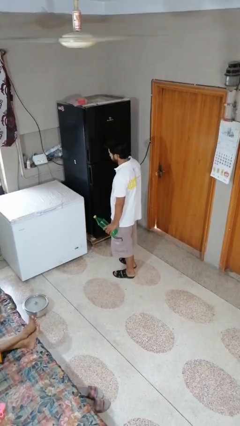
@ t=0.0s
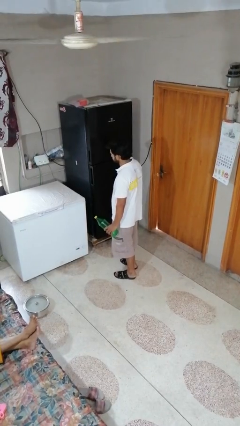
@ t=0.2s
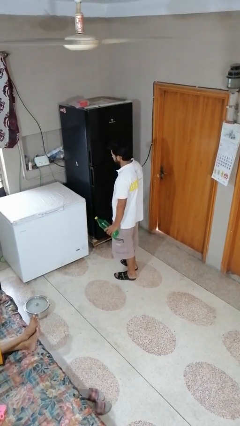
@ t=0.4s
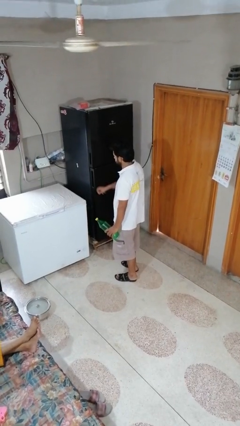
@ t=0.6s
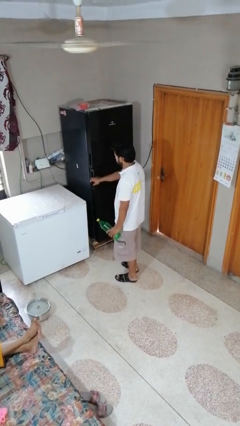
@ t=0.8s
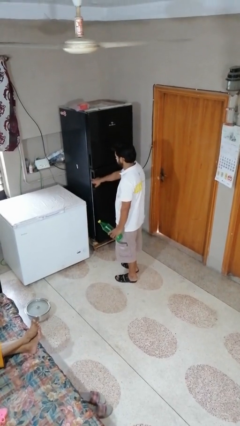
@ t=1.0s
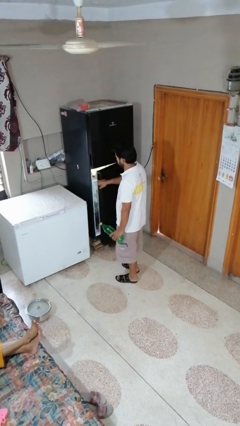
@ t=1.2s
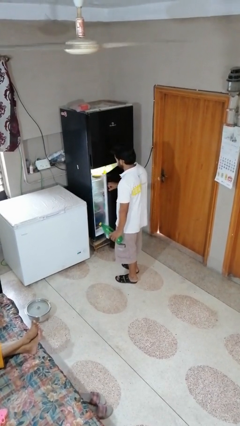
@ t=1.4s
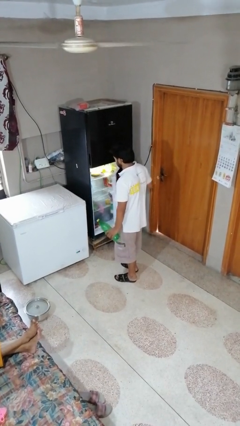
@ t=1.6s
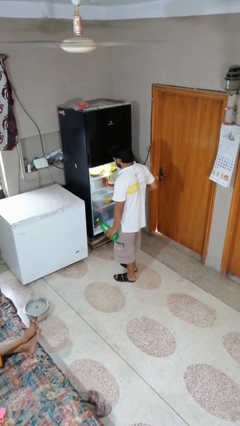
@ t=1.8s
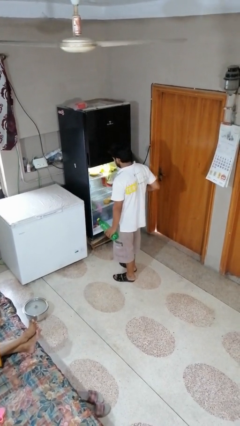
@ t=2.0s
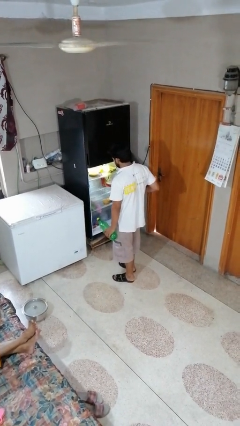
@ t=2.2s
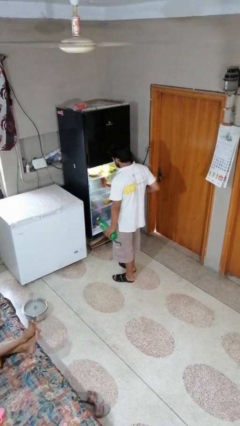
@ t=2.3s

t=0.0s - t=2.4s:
person opens refrigerator

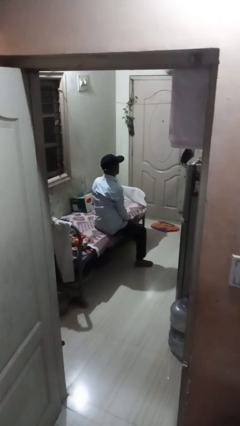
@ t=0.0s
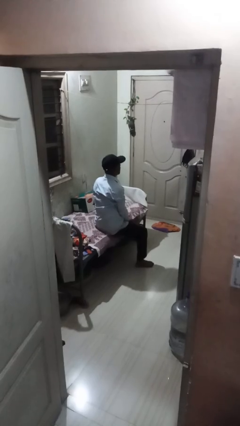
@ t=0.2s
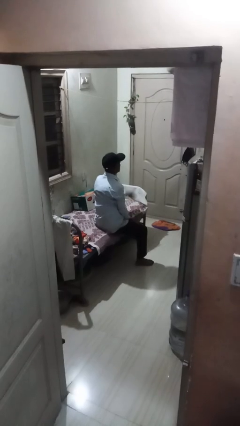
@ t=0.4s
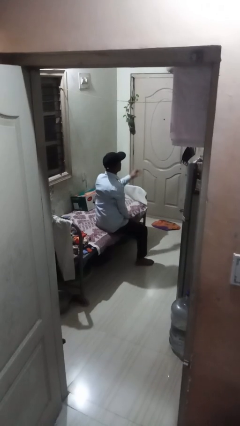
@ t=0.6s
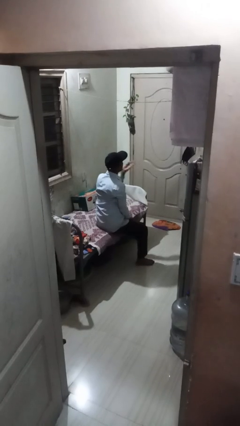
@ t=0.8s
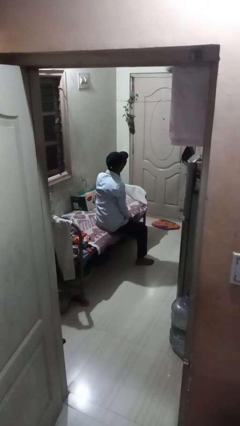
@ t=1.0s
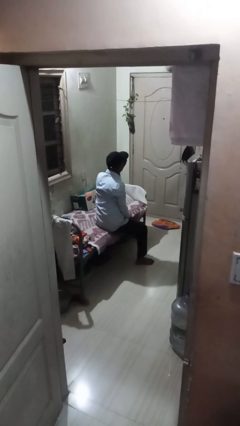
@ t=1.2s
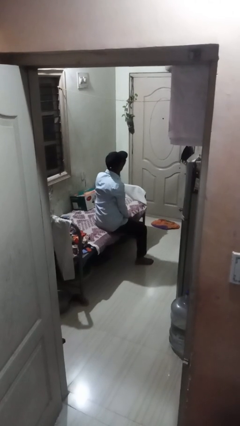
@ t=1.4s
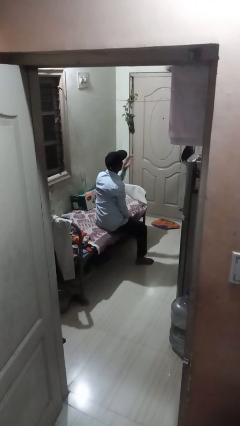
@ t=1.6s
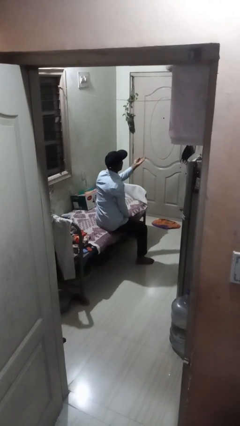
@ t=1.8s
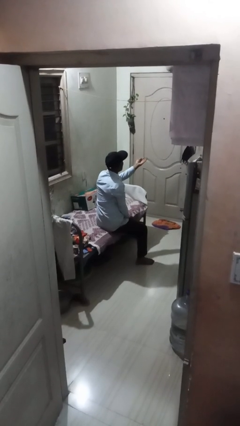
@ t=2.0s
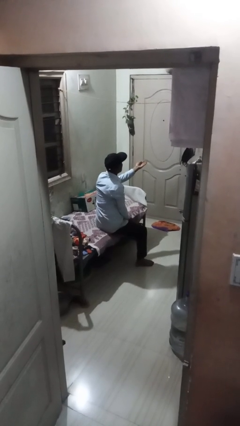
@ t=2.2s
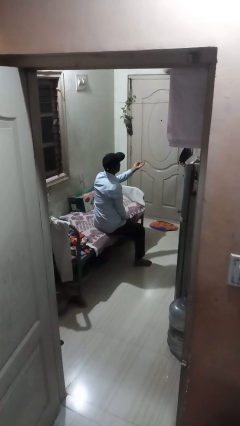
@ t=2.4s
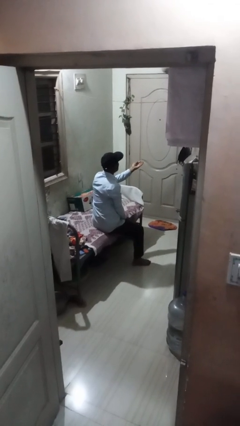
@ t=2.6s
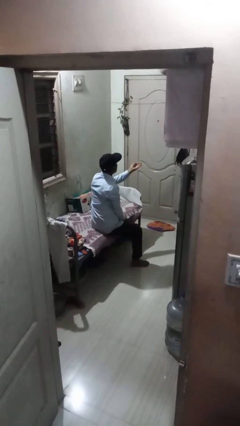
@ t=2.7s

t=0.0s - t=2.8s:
person gestures blow kiss

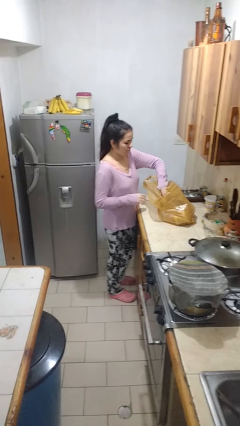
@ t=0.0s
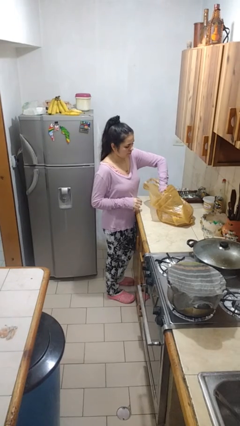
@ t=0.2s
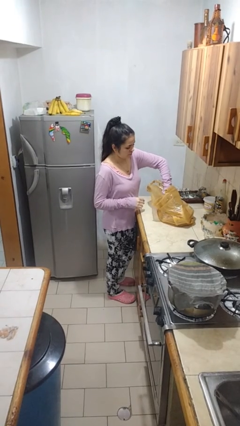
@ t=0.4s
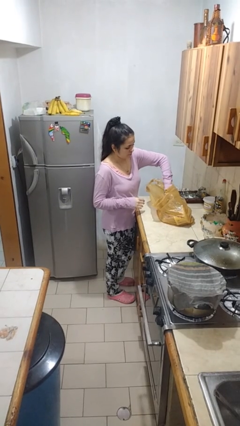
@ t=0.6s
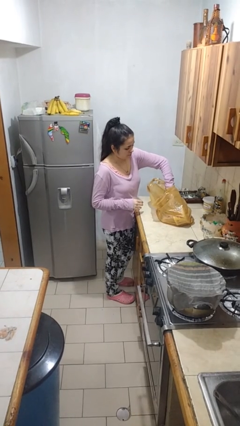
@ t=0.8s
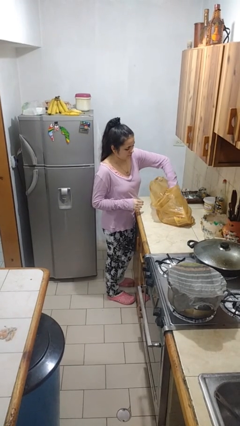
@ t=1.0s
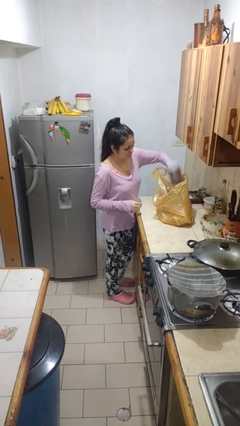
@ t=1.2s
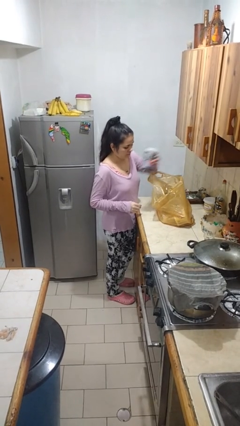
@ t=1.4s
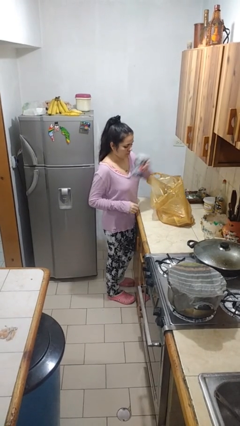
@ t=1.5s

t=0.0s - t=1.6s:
person takes object from bag

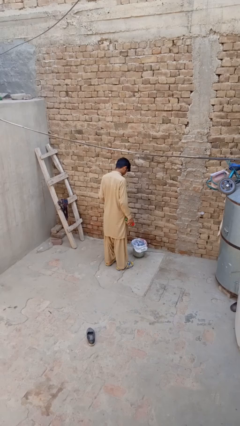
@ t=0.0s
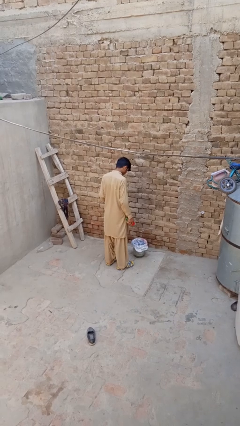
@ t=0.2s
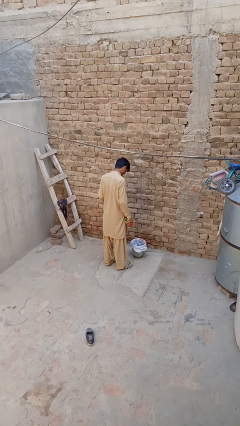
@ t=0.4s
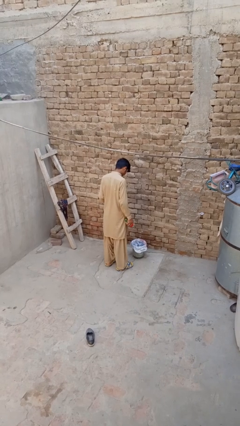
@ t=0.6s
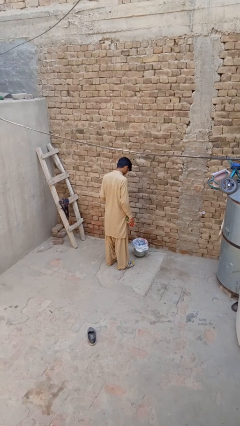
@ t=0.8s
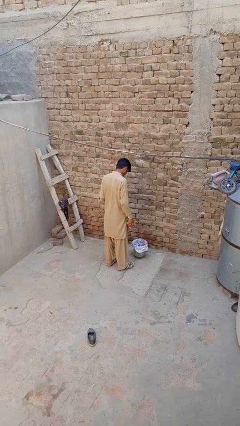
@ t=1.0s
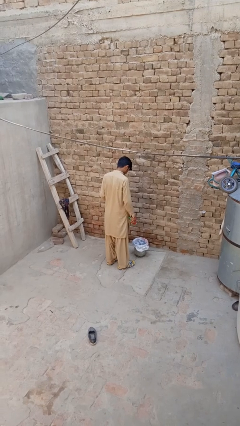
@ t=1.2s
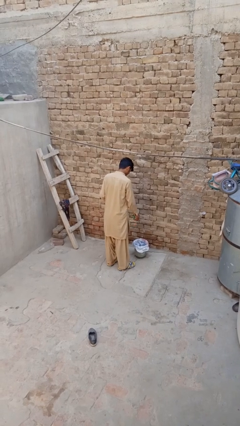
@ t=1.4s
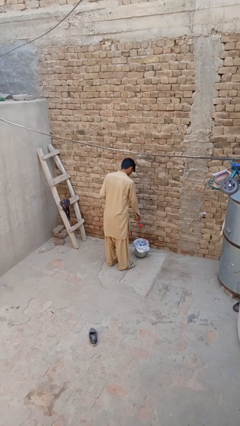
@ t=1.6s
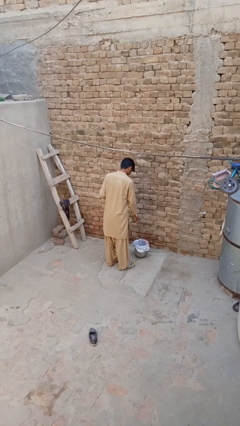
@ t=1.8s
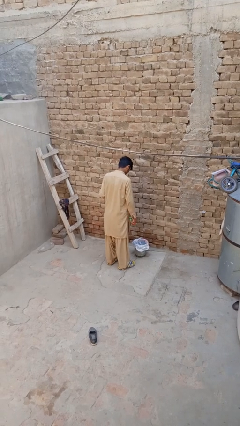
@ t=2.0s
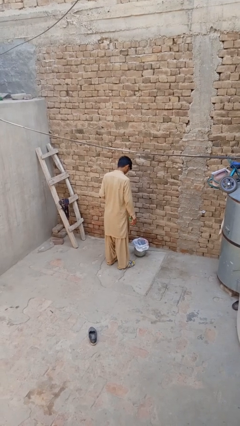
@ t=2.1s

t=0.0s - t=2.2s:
person discards trash

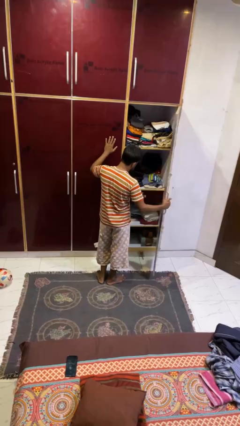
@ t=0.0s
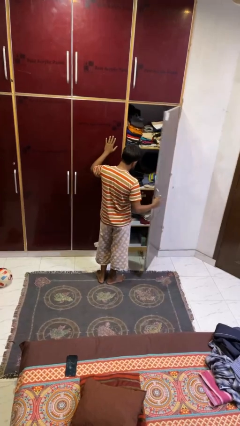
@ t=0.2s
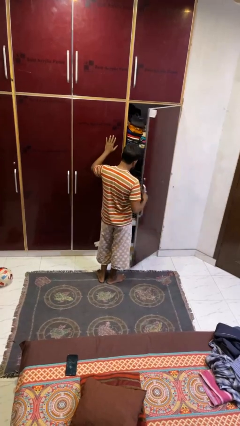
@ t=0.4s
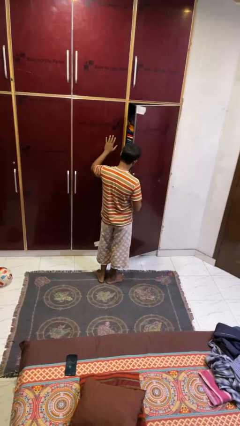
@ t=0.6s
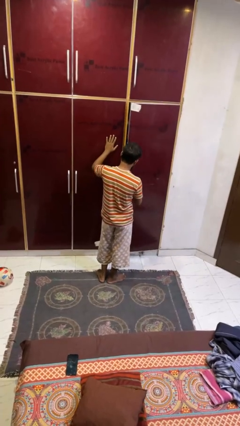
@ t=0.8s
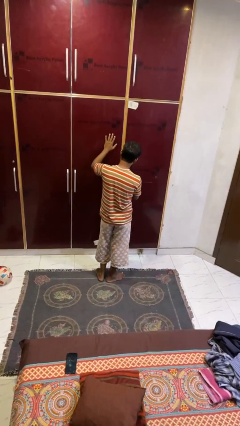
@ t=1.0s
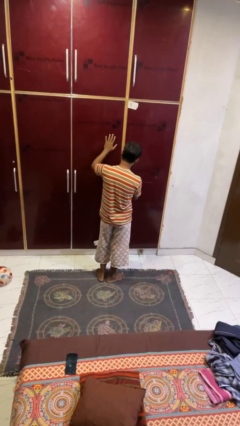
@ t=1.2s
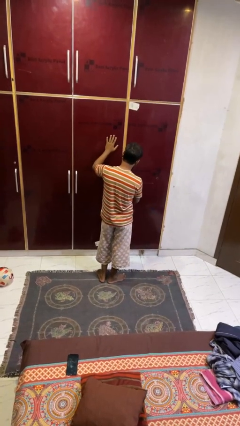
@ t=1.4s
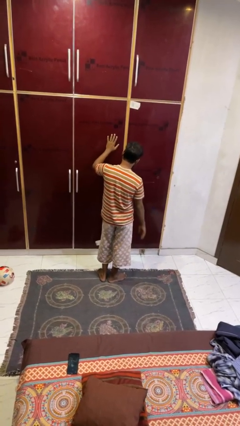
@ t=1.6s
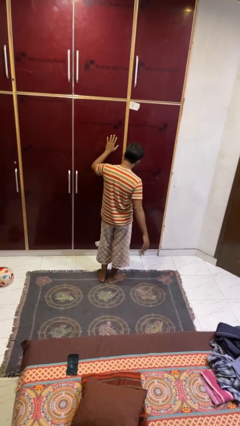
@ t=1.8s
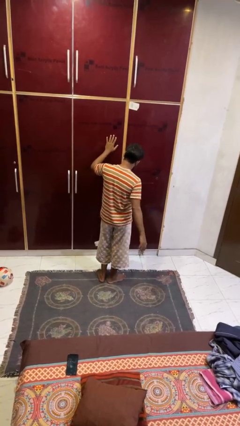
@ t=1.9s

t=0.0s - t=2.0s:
person closes closet door

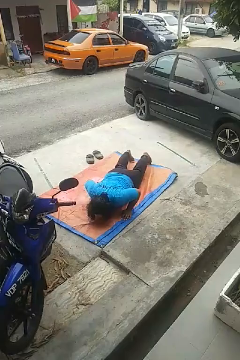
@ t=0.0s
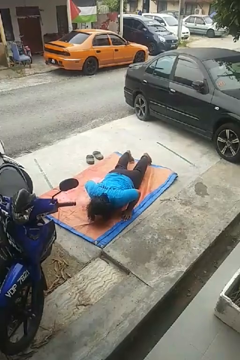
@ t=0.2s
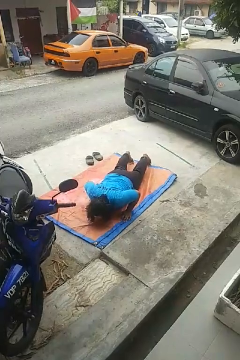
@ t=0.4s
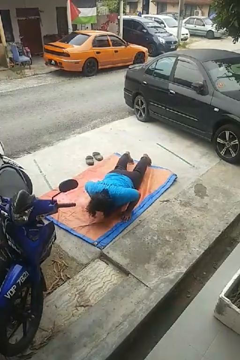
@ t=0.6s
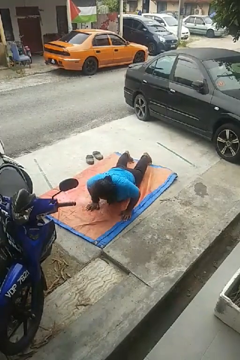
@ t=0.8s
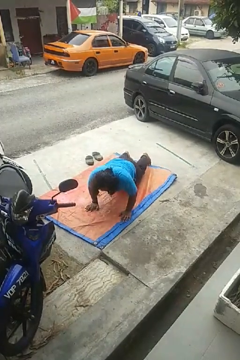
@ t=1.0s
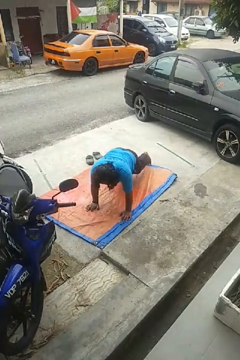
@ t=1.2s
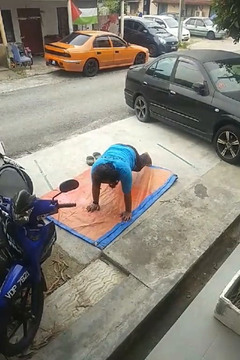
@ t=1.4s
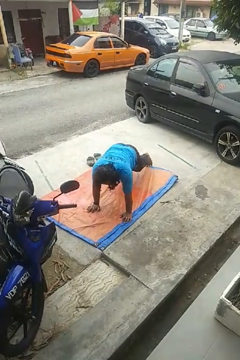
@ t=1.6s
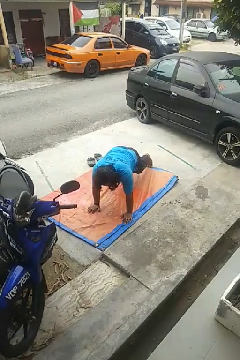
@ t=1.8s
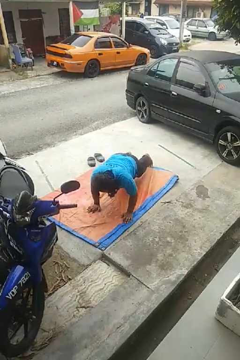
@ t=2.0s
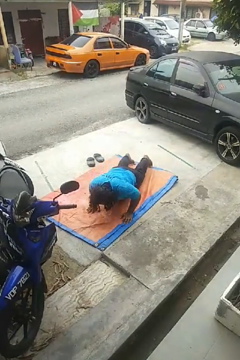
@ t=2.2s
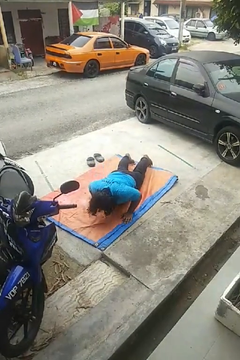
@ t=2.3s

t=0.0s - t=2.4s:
person exercises with pushup

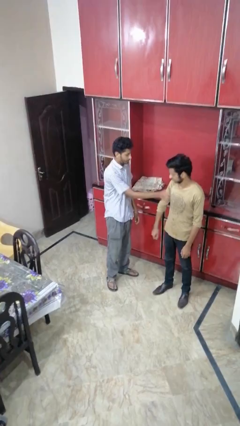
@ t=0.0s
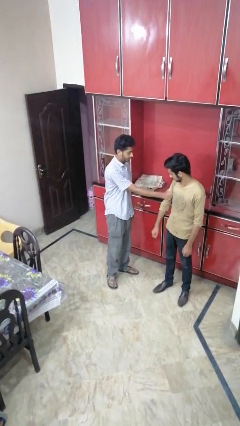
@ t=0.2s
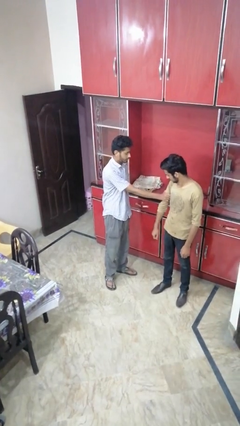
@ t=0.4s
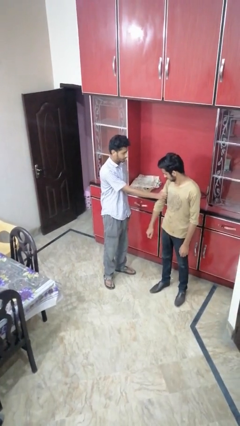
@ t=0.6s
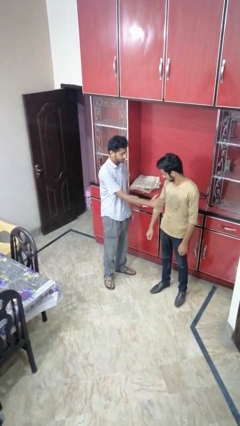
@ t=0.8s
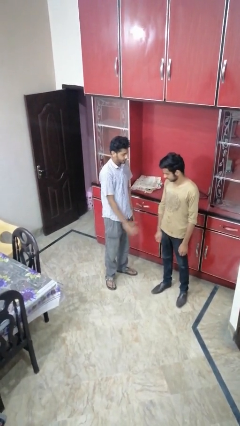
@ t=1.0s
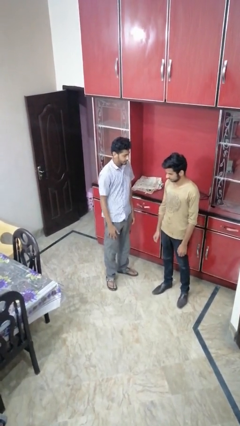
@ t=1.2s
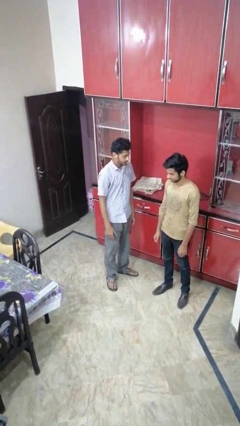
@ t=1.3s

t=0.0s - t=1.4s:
person grabs person by bicep

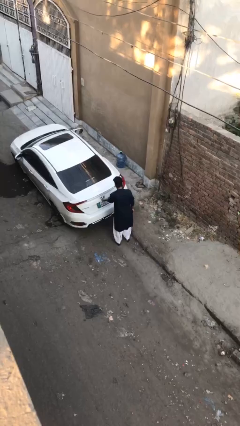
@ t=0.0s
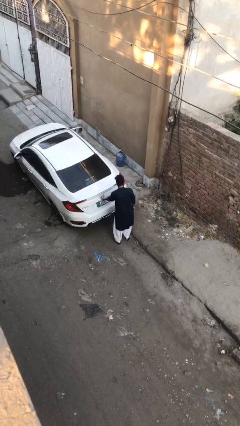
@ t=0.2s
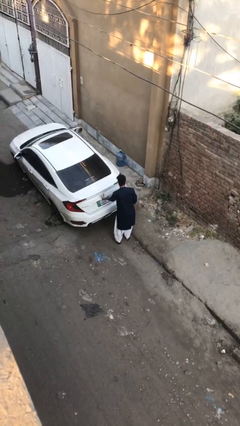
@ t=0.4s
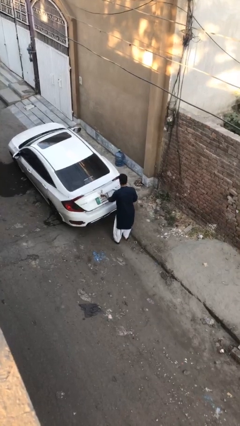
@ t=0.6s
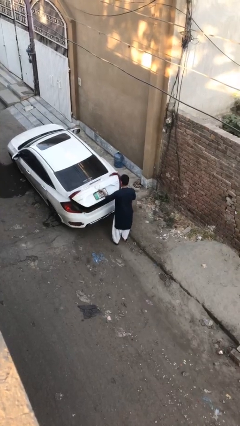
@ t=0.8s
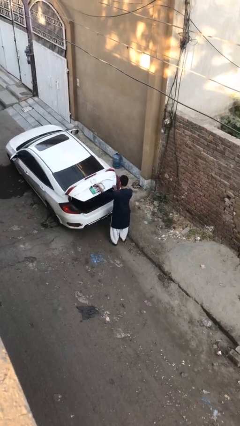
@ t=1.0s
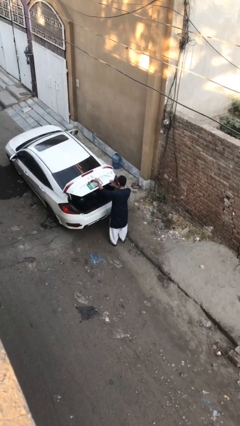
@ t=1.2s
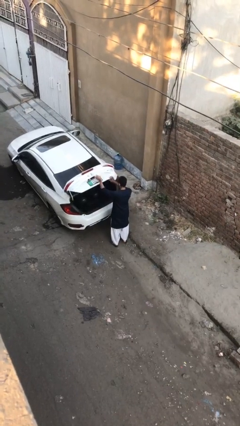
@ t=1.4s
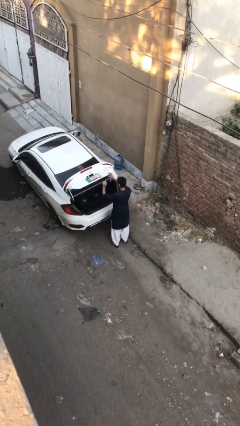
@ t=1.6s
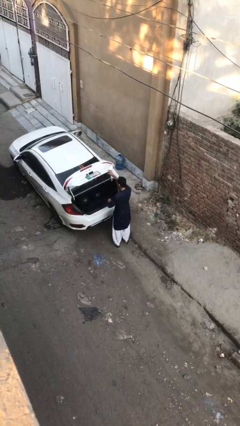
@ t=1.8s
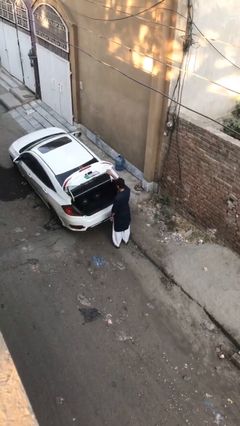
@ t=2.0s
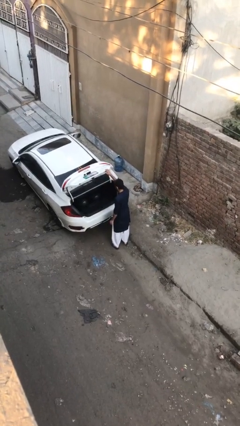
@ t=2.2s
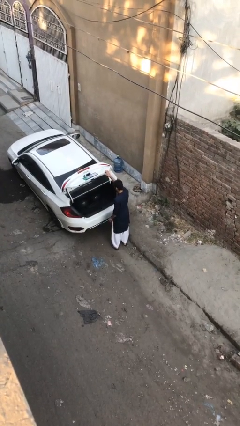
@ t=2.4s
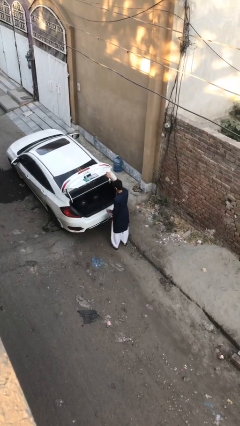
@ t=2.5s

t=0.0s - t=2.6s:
person opens car trunk
